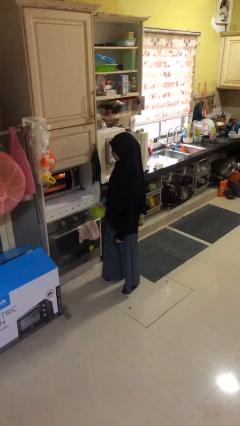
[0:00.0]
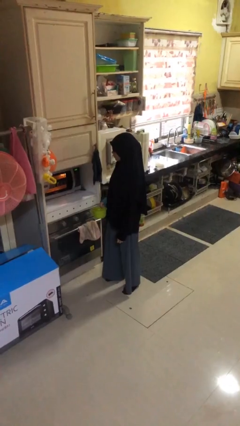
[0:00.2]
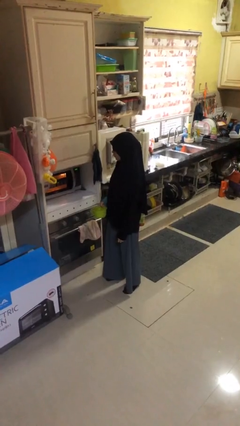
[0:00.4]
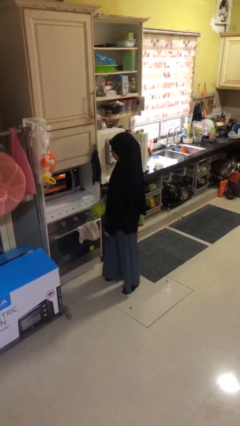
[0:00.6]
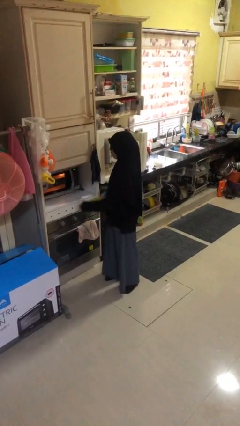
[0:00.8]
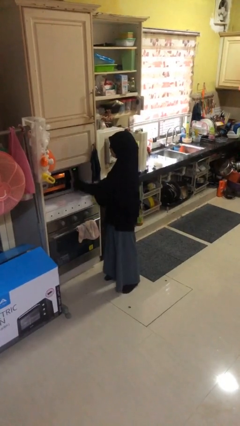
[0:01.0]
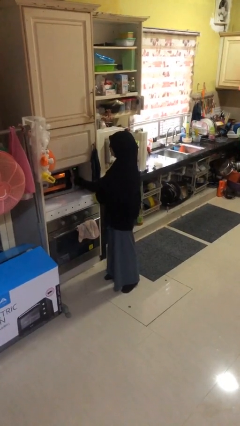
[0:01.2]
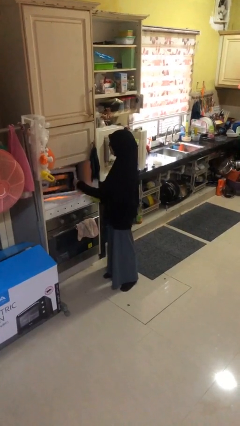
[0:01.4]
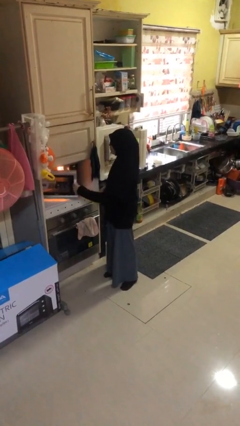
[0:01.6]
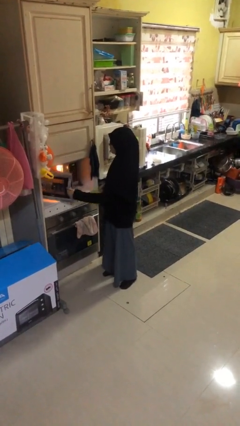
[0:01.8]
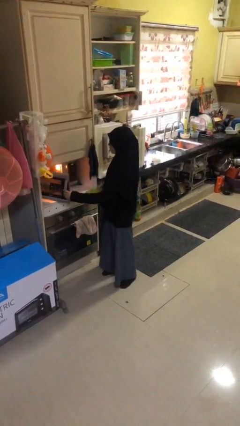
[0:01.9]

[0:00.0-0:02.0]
person opens microwave

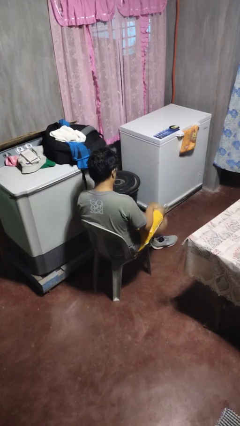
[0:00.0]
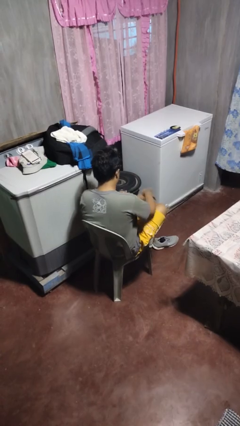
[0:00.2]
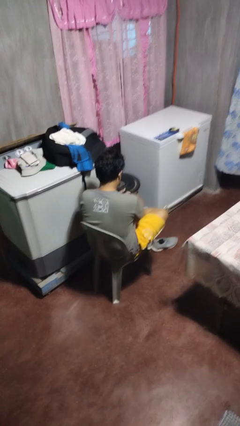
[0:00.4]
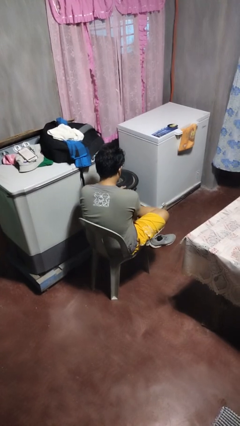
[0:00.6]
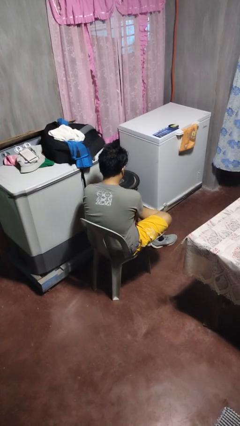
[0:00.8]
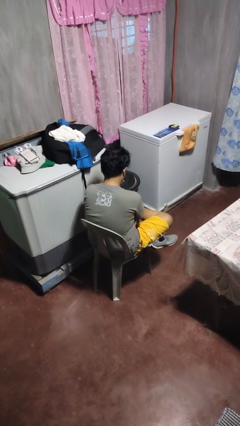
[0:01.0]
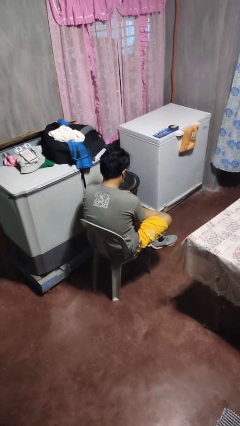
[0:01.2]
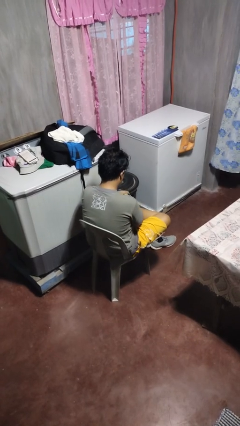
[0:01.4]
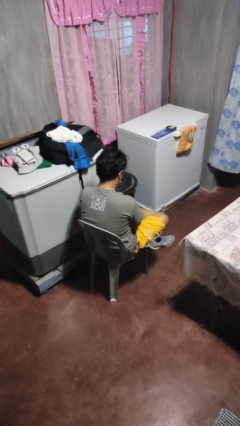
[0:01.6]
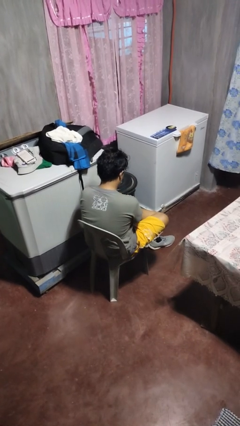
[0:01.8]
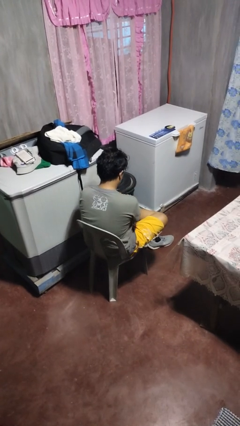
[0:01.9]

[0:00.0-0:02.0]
person rubs foot

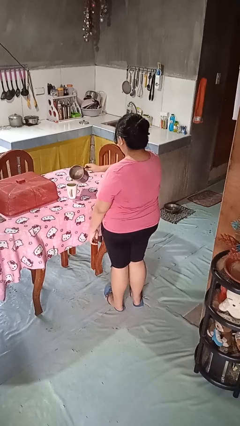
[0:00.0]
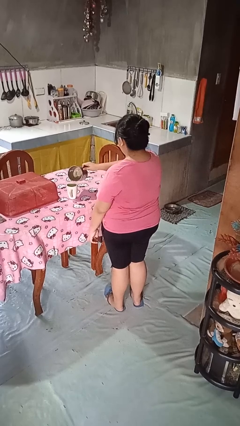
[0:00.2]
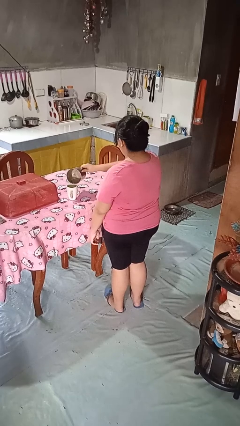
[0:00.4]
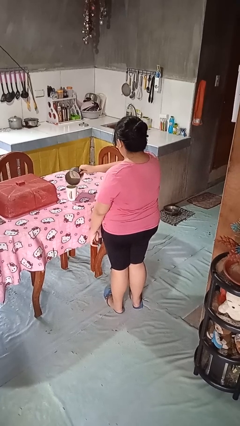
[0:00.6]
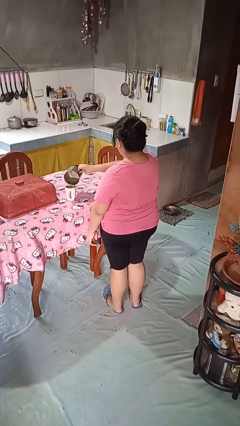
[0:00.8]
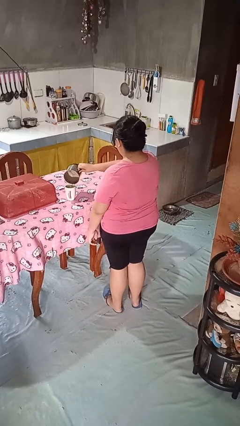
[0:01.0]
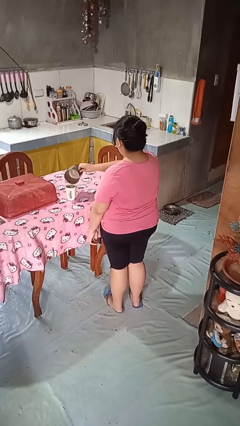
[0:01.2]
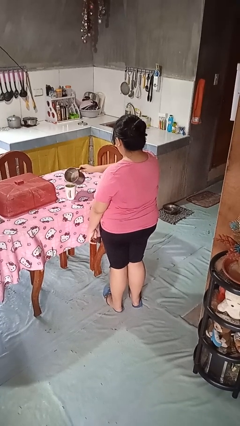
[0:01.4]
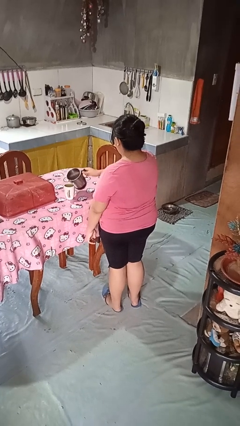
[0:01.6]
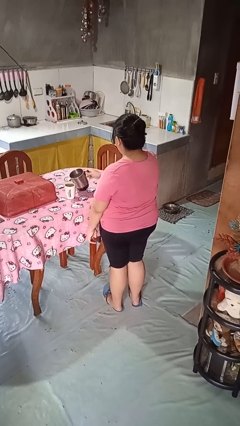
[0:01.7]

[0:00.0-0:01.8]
person pours coffee into mug

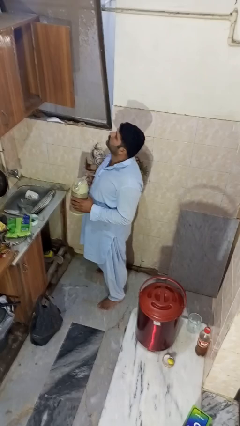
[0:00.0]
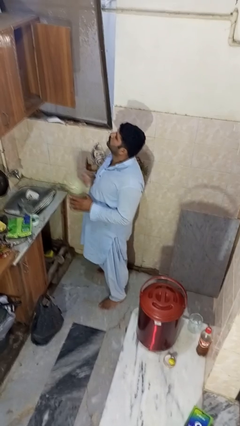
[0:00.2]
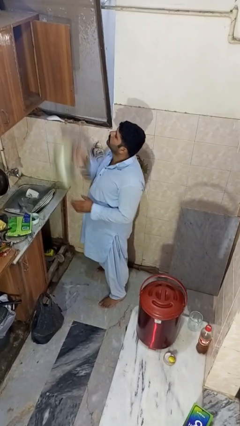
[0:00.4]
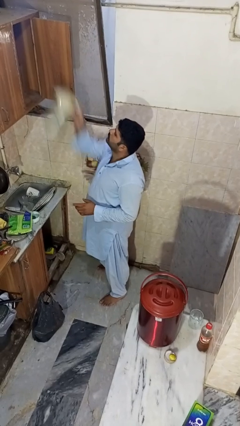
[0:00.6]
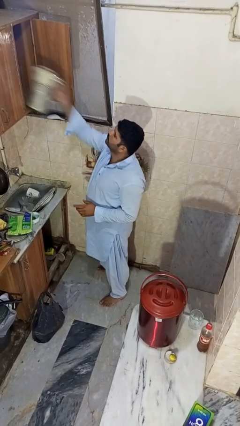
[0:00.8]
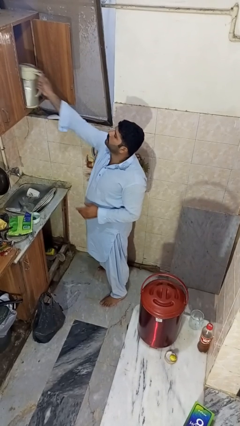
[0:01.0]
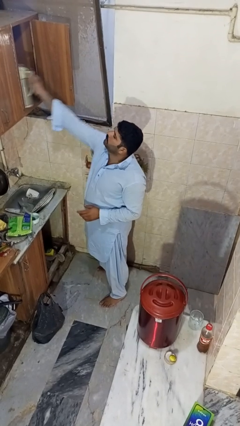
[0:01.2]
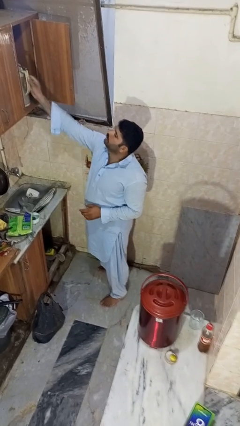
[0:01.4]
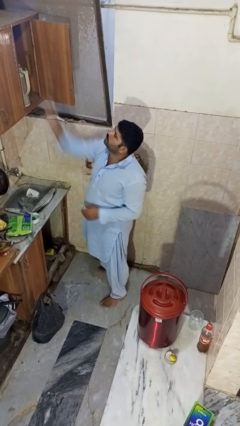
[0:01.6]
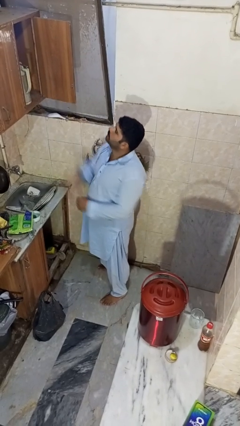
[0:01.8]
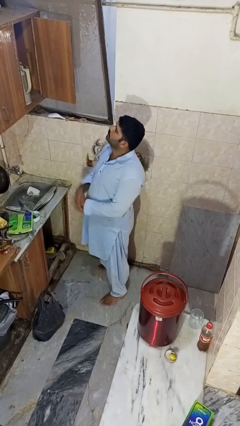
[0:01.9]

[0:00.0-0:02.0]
person puts object in cabinet

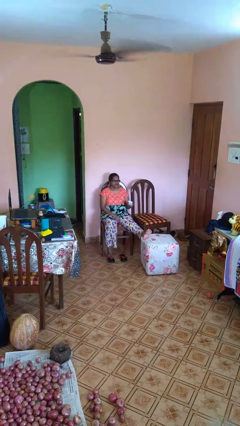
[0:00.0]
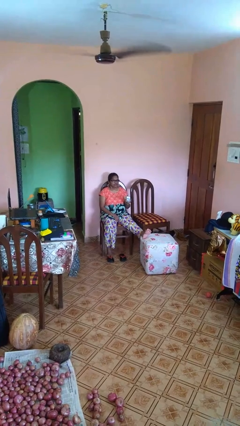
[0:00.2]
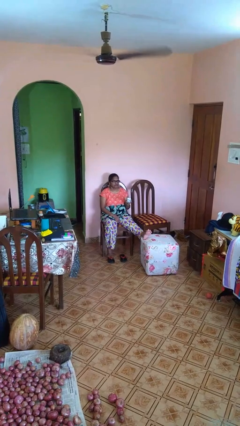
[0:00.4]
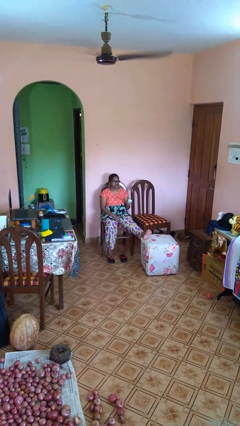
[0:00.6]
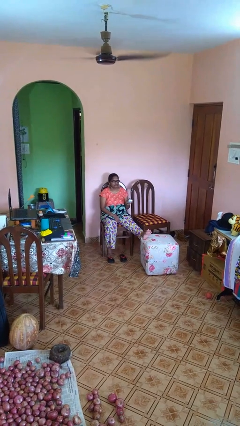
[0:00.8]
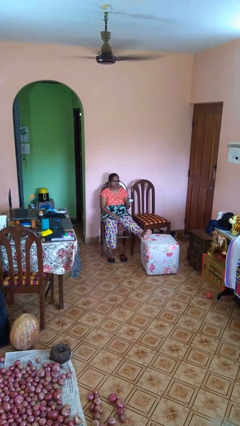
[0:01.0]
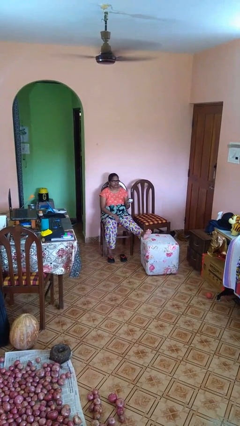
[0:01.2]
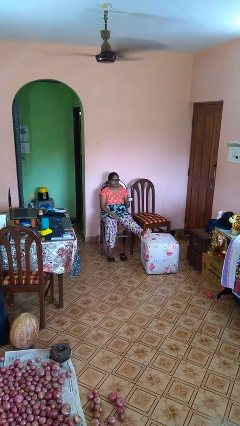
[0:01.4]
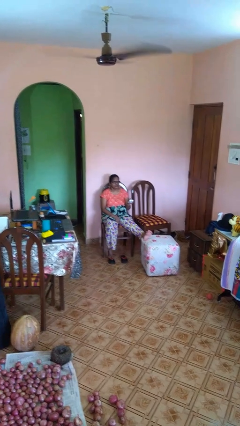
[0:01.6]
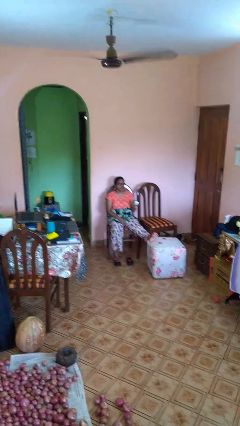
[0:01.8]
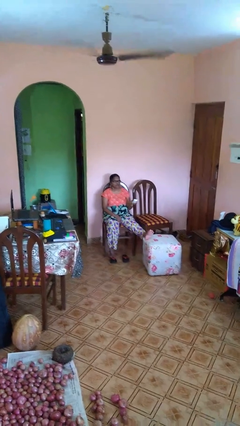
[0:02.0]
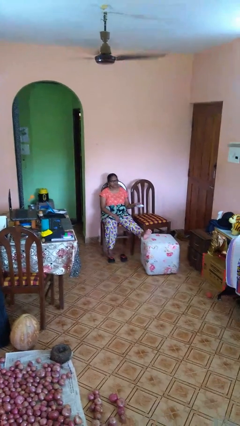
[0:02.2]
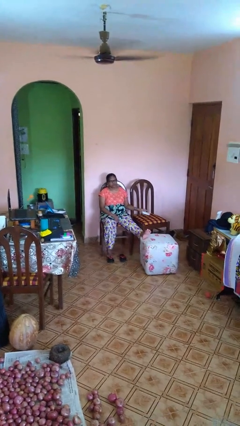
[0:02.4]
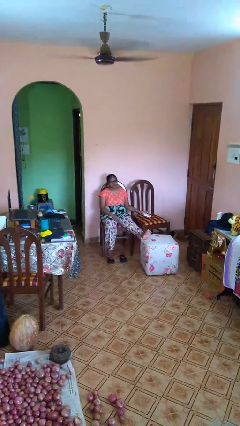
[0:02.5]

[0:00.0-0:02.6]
person uses television remote

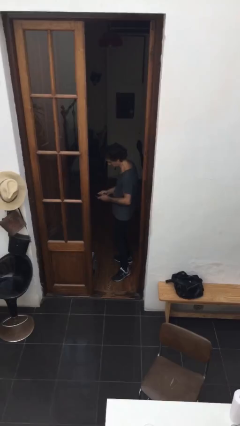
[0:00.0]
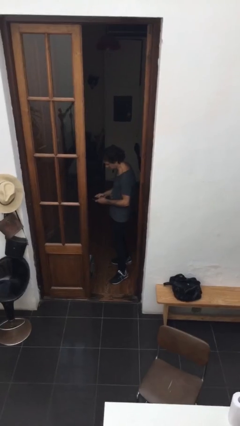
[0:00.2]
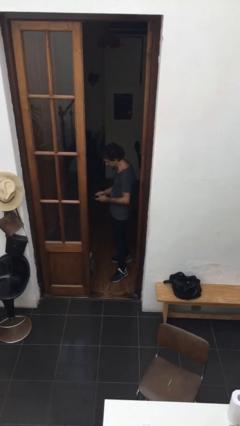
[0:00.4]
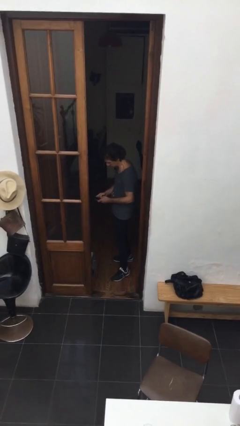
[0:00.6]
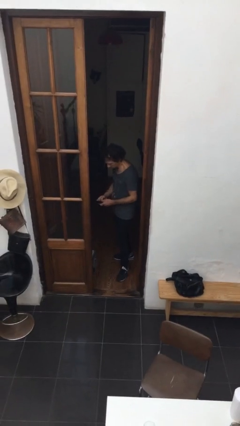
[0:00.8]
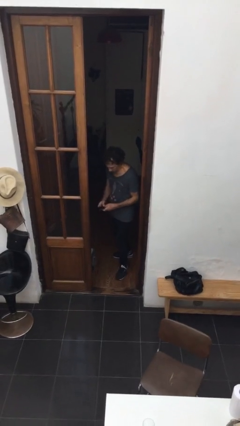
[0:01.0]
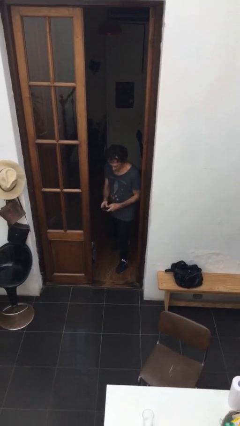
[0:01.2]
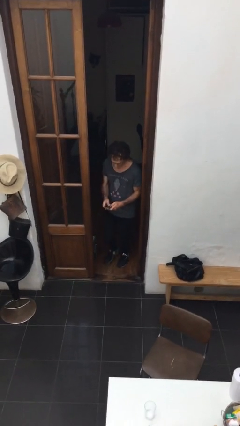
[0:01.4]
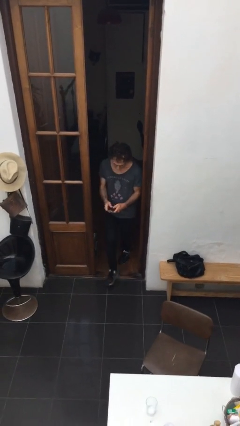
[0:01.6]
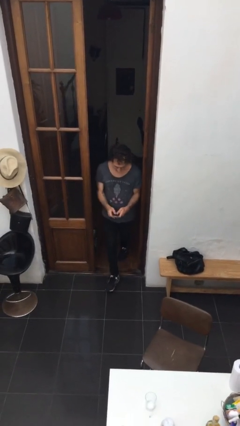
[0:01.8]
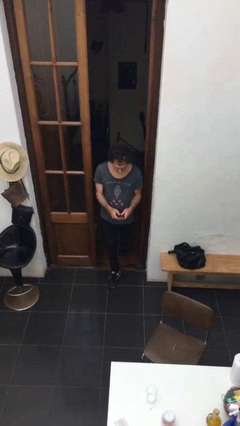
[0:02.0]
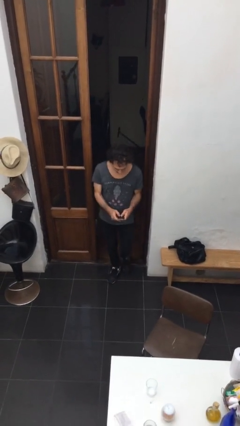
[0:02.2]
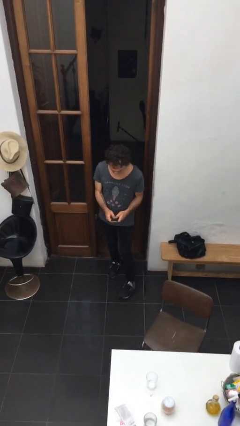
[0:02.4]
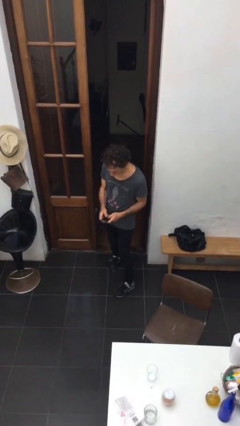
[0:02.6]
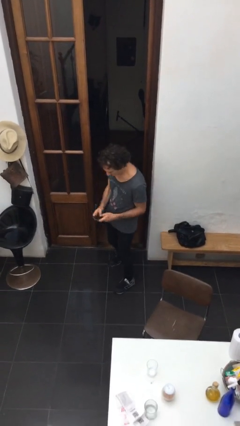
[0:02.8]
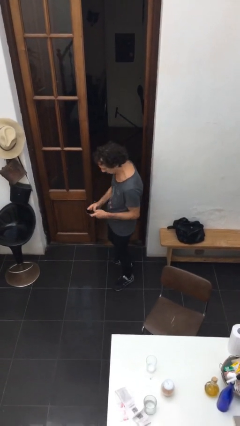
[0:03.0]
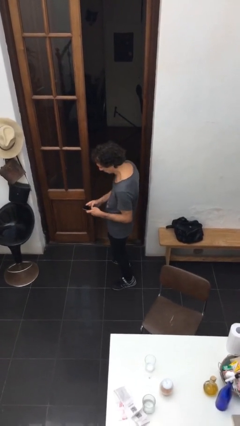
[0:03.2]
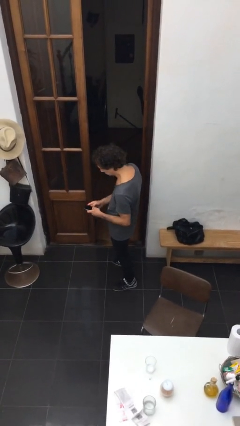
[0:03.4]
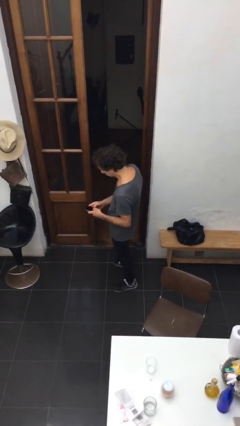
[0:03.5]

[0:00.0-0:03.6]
person enters scene through structure

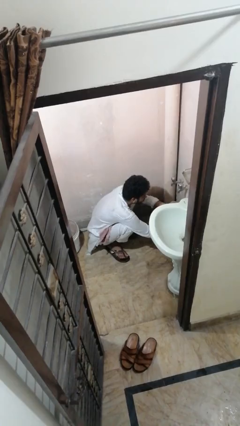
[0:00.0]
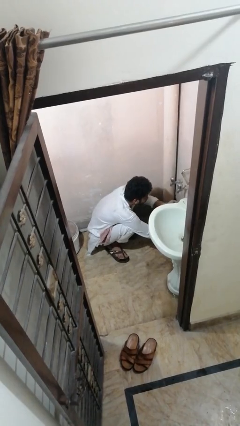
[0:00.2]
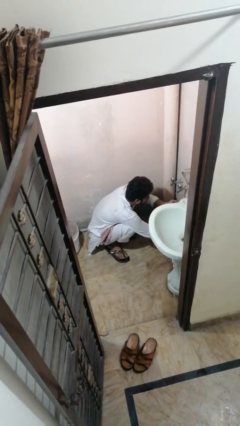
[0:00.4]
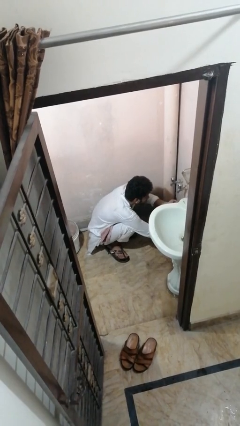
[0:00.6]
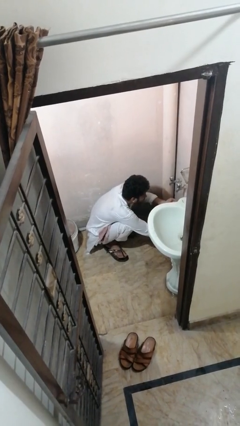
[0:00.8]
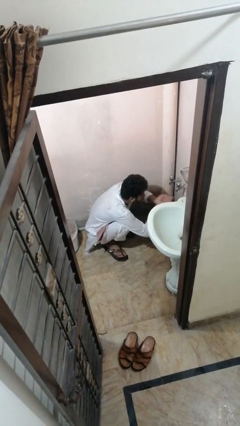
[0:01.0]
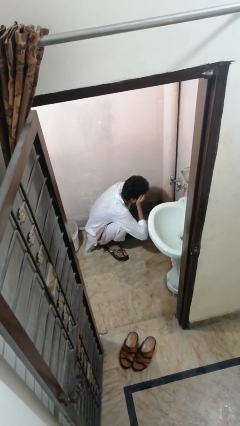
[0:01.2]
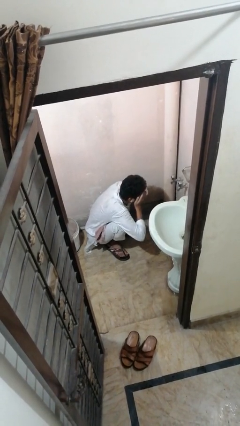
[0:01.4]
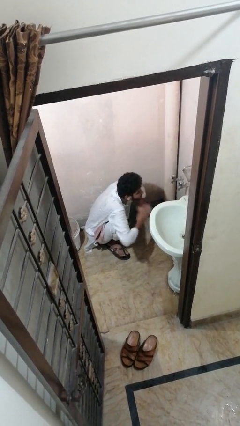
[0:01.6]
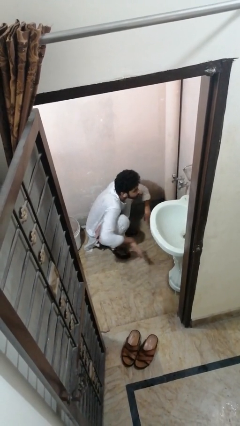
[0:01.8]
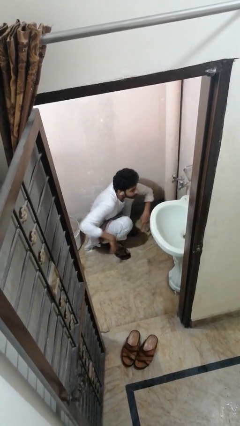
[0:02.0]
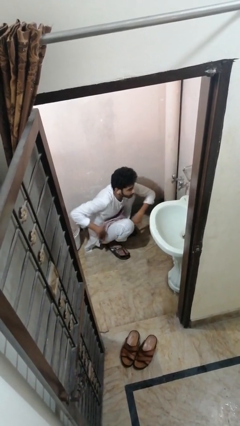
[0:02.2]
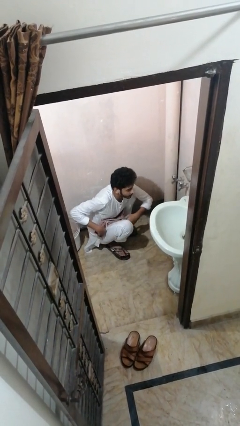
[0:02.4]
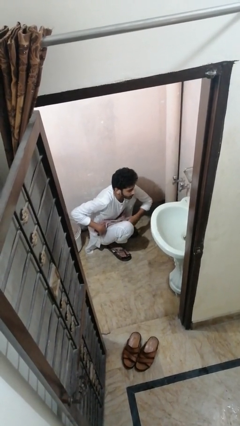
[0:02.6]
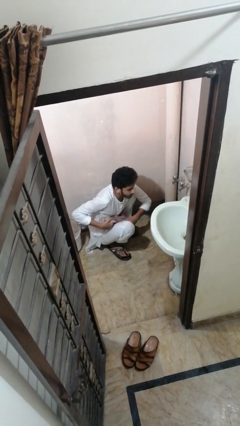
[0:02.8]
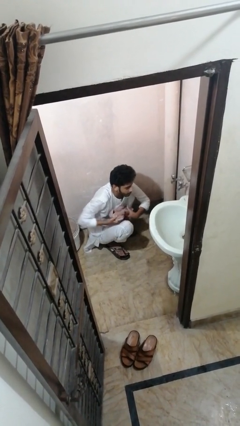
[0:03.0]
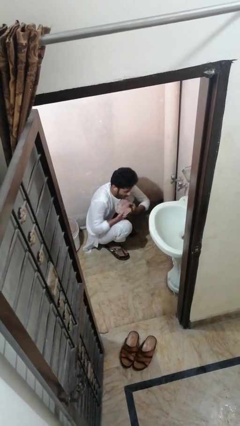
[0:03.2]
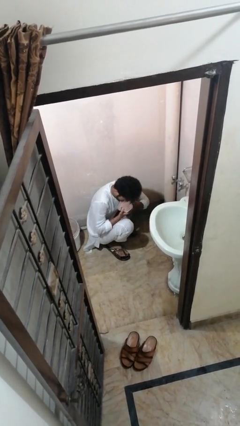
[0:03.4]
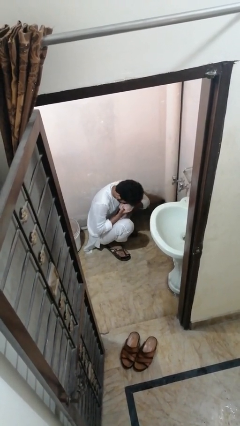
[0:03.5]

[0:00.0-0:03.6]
person washes face
